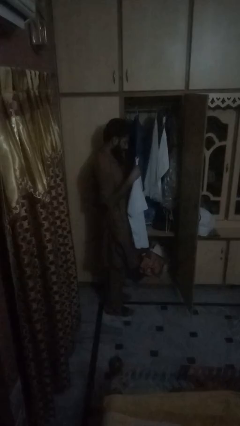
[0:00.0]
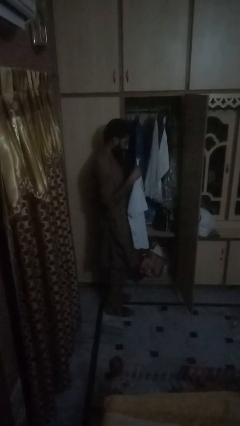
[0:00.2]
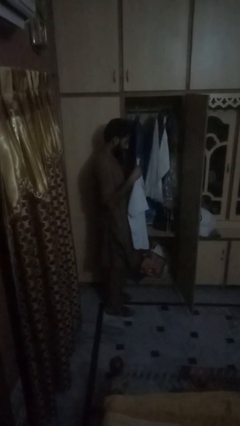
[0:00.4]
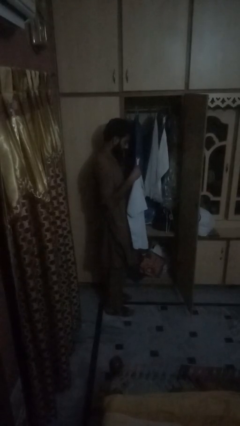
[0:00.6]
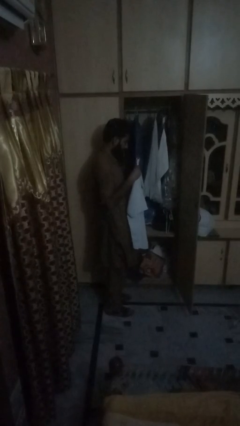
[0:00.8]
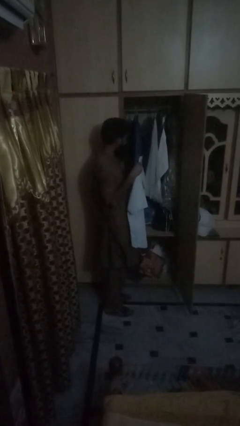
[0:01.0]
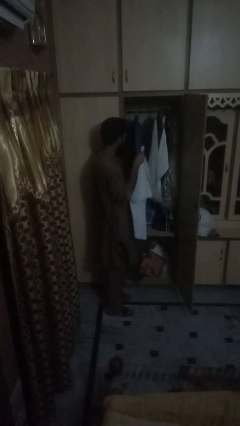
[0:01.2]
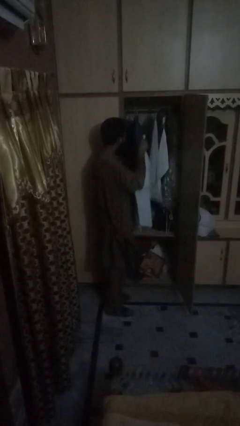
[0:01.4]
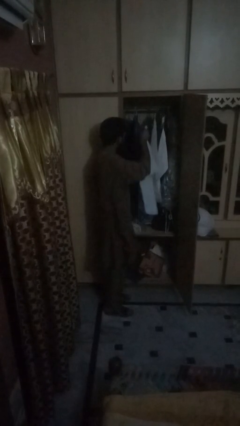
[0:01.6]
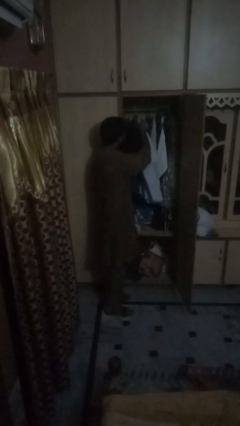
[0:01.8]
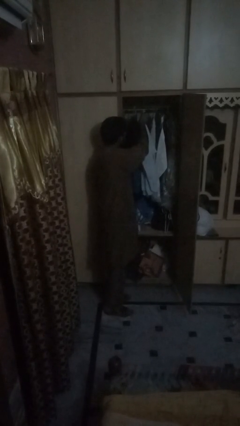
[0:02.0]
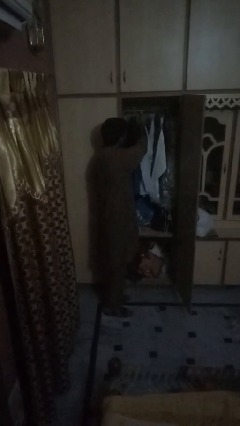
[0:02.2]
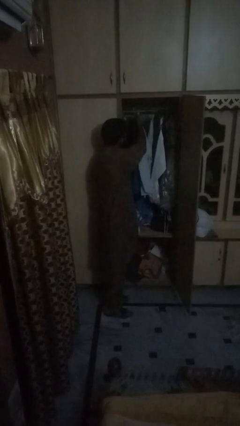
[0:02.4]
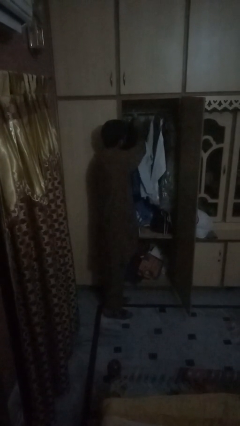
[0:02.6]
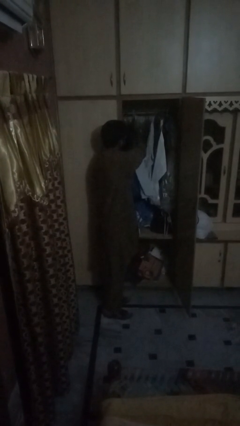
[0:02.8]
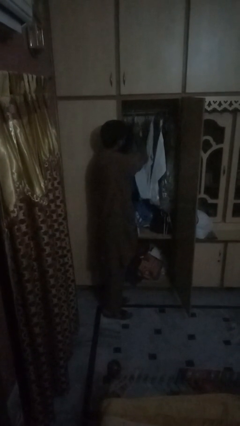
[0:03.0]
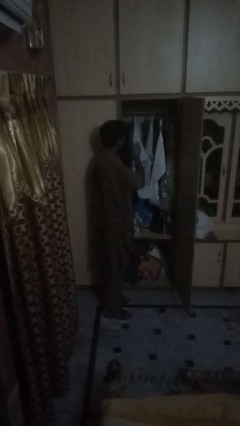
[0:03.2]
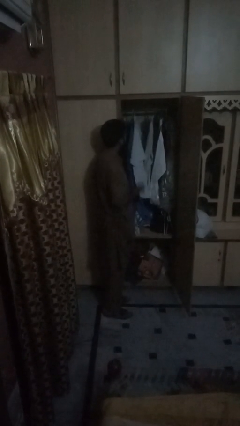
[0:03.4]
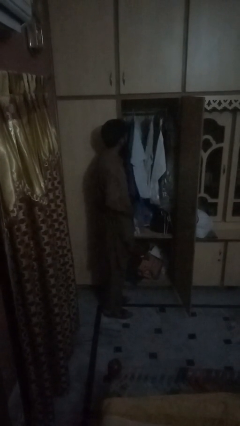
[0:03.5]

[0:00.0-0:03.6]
person takes clothes from dresser

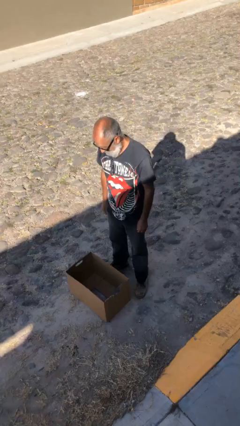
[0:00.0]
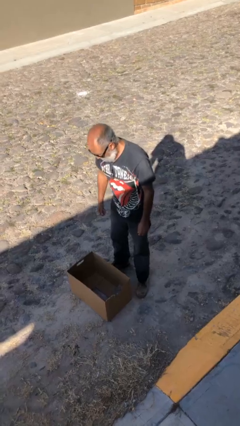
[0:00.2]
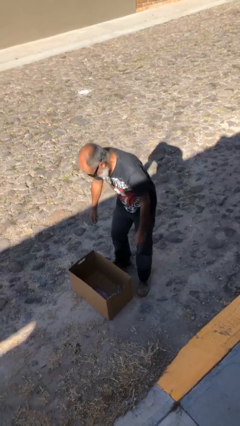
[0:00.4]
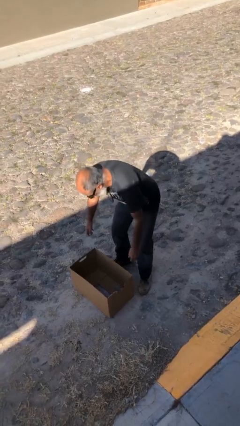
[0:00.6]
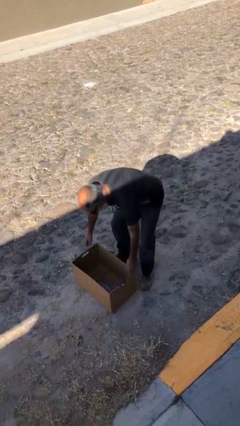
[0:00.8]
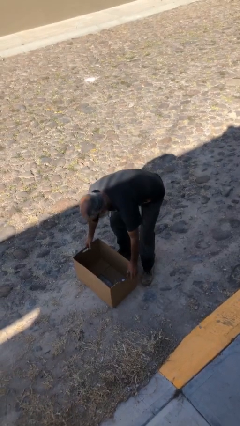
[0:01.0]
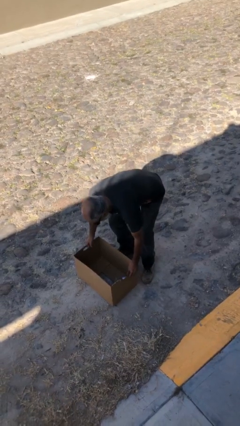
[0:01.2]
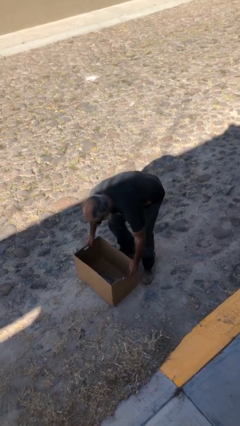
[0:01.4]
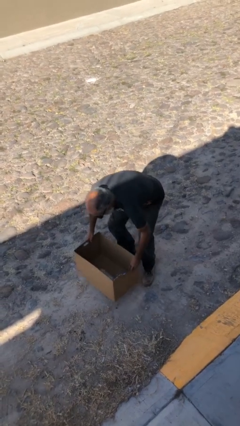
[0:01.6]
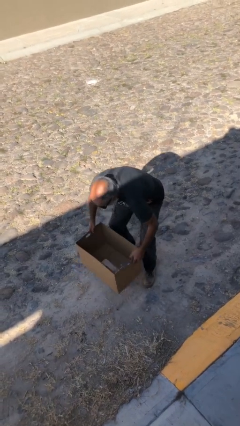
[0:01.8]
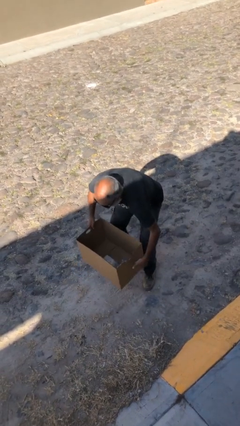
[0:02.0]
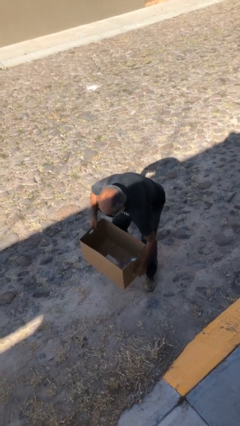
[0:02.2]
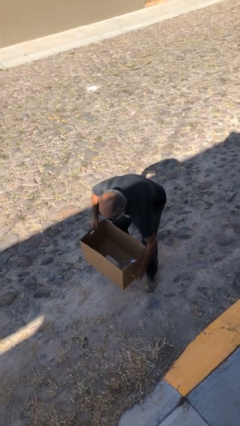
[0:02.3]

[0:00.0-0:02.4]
person picks up object from floor

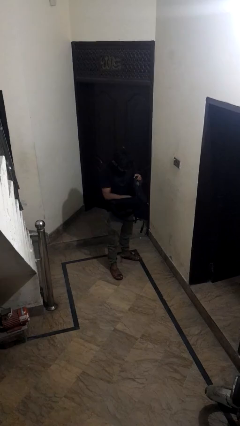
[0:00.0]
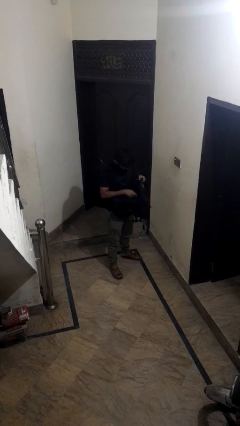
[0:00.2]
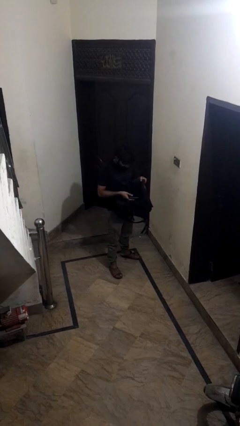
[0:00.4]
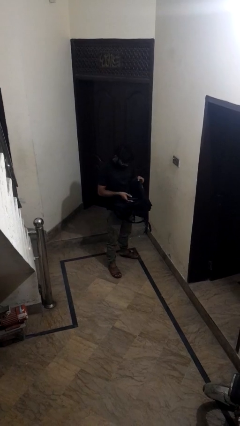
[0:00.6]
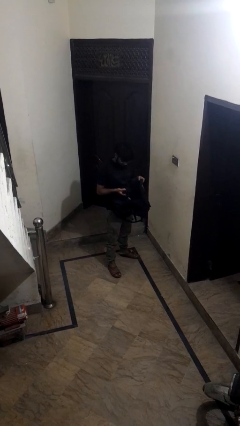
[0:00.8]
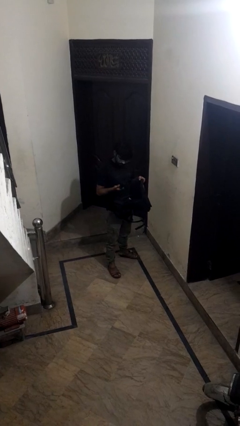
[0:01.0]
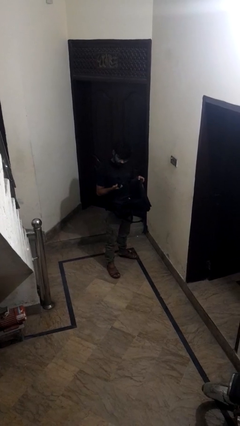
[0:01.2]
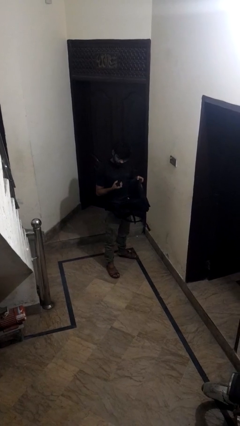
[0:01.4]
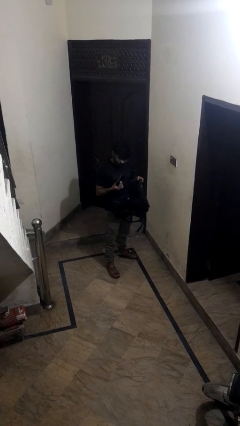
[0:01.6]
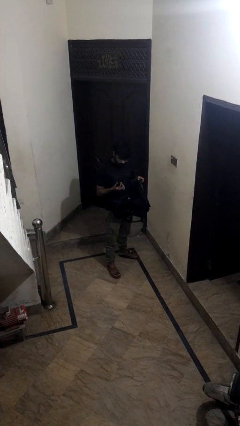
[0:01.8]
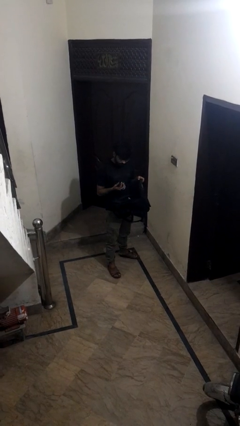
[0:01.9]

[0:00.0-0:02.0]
person takes object from backpack

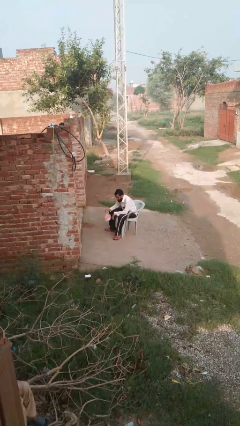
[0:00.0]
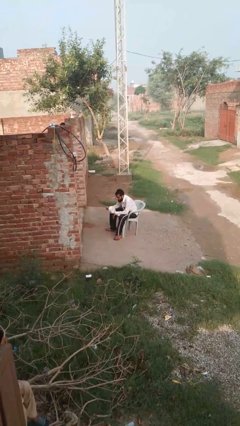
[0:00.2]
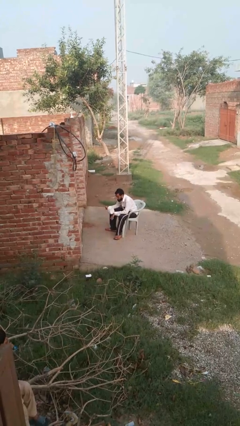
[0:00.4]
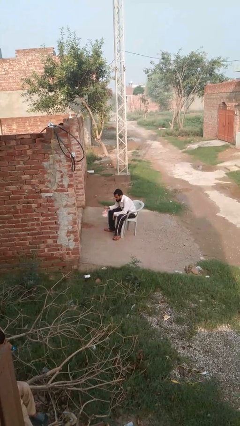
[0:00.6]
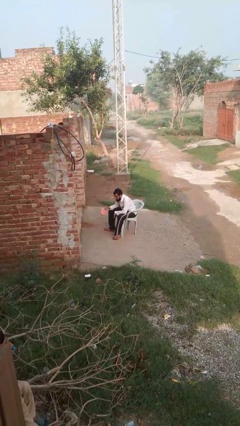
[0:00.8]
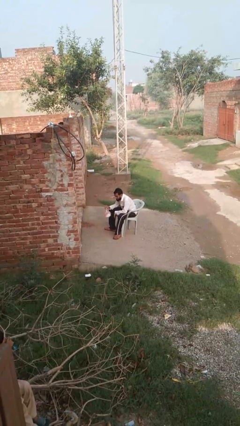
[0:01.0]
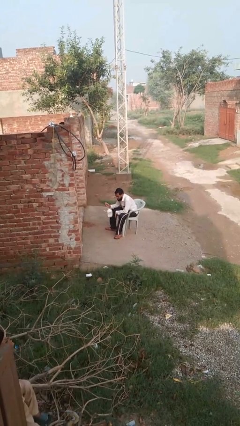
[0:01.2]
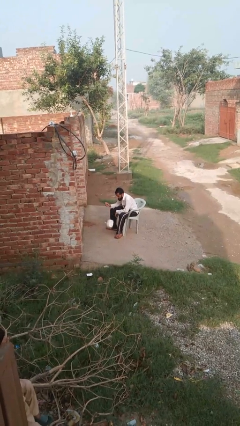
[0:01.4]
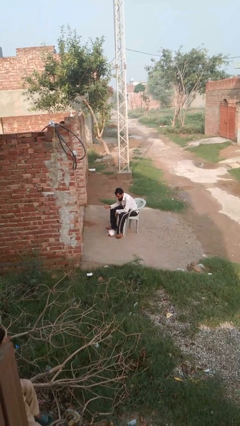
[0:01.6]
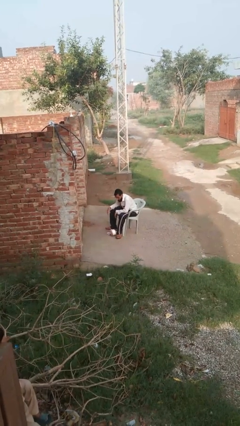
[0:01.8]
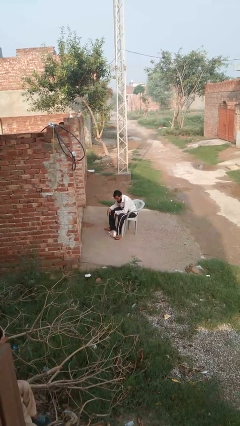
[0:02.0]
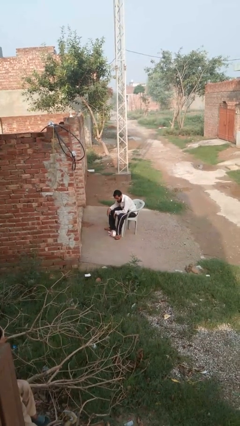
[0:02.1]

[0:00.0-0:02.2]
person drops object

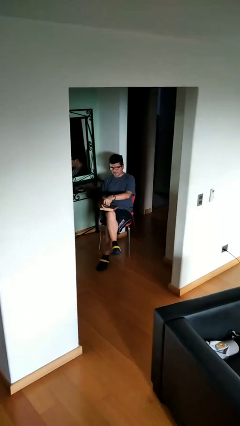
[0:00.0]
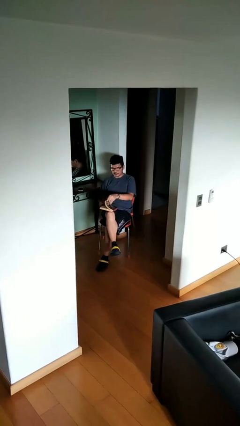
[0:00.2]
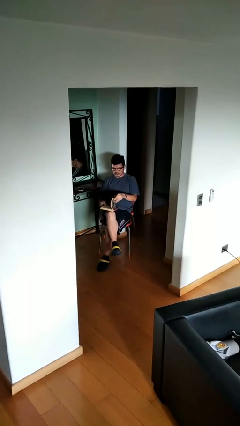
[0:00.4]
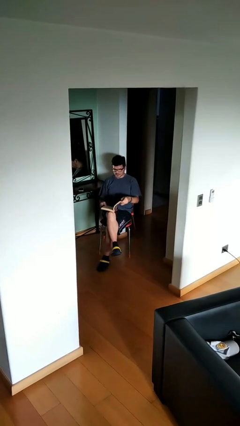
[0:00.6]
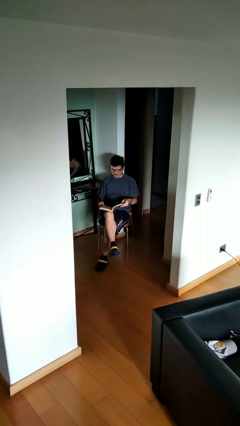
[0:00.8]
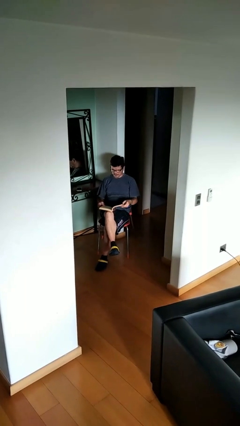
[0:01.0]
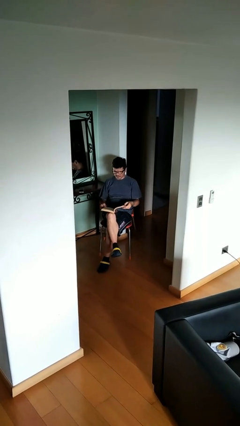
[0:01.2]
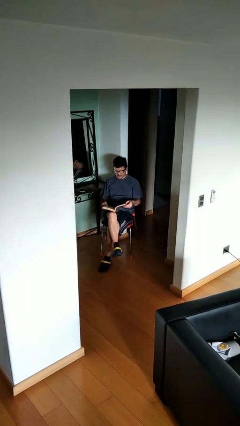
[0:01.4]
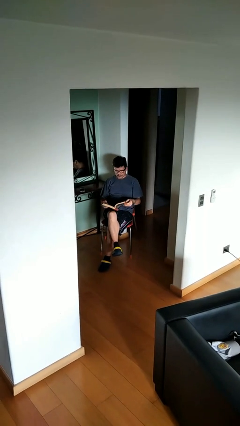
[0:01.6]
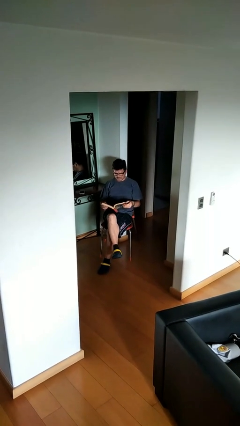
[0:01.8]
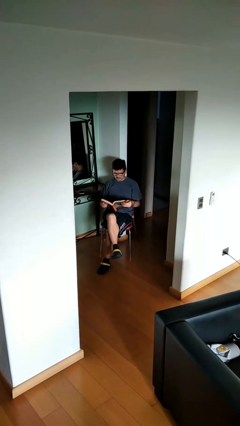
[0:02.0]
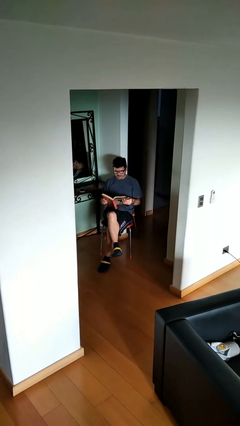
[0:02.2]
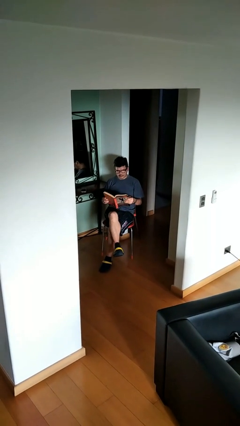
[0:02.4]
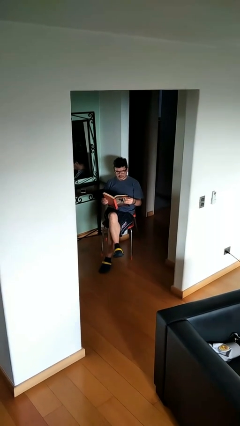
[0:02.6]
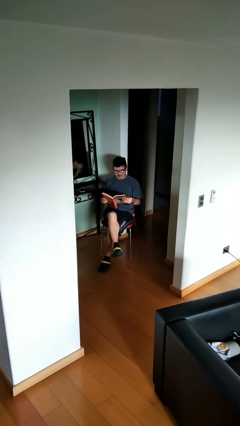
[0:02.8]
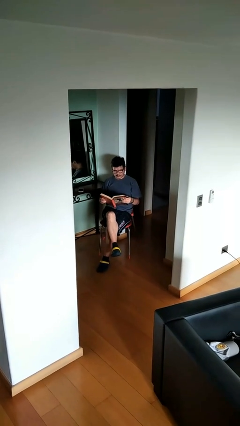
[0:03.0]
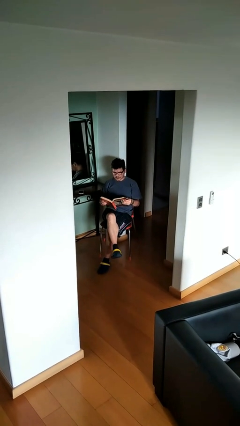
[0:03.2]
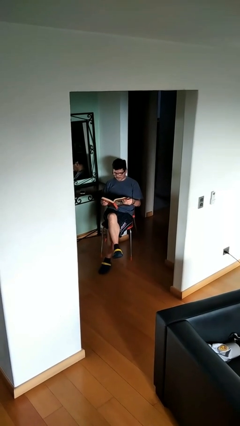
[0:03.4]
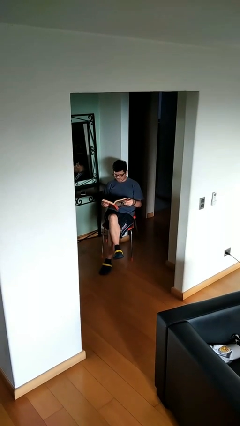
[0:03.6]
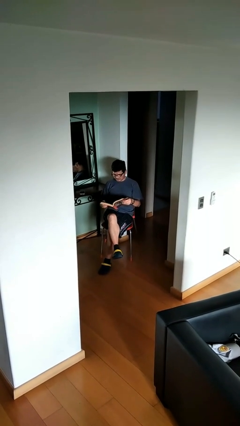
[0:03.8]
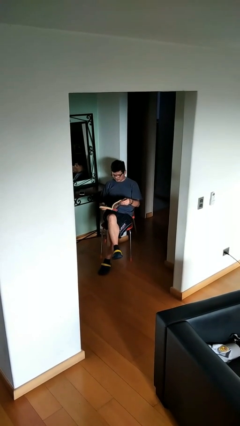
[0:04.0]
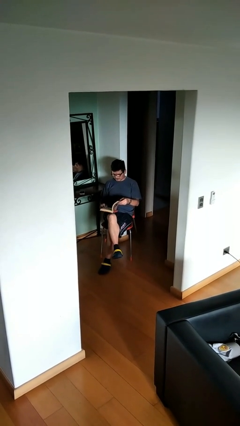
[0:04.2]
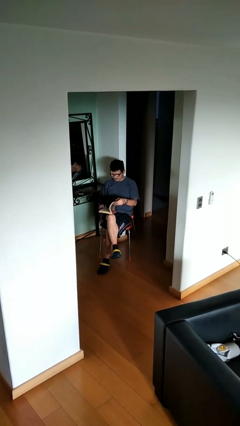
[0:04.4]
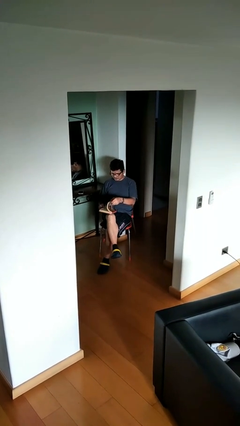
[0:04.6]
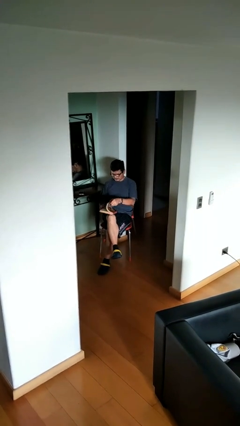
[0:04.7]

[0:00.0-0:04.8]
person reads document

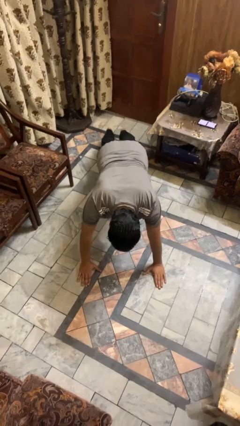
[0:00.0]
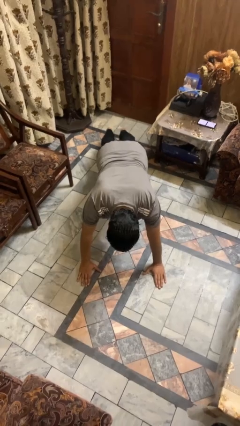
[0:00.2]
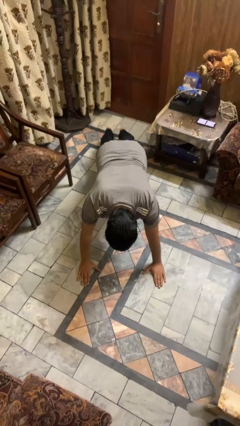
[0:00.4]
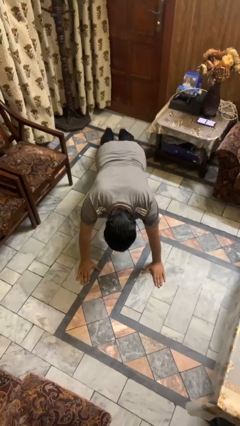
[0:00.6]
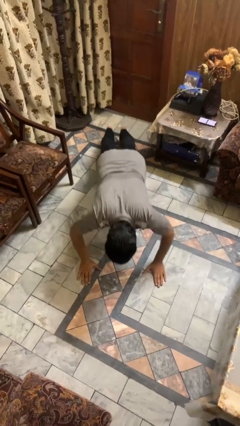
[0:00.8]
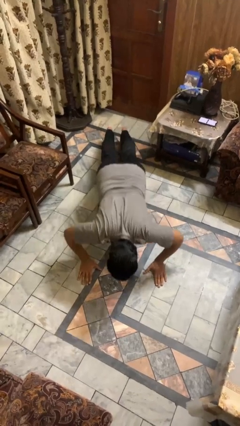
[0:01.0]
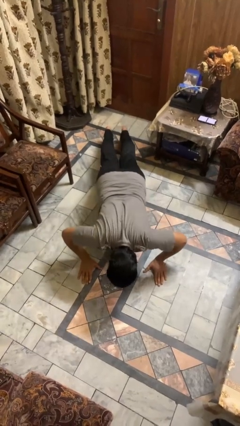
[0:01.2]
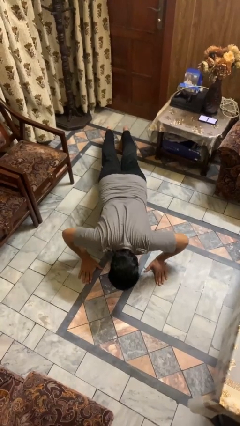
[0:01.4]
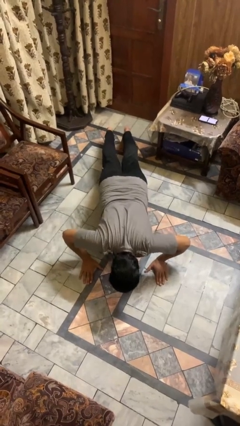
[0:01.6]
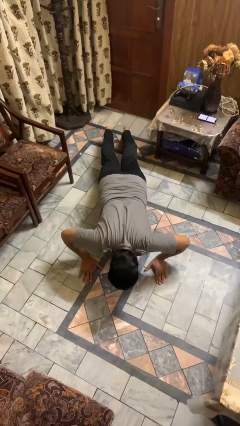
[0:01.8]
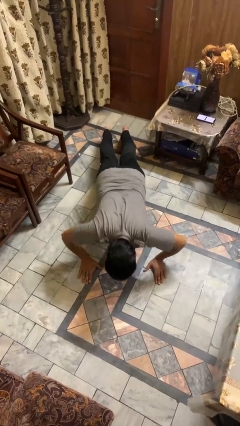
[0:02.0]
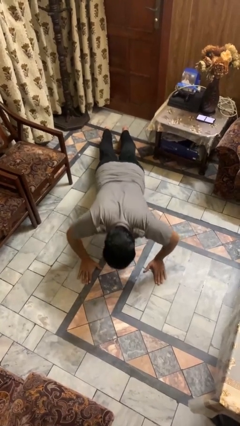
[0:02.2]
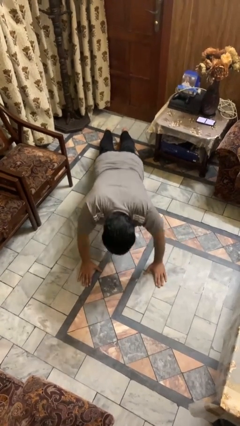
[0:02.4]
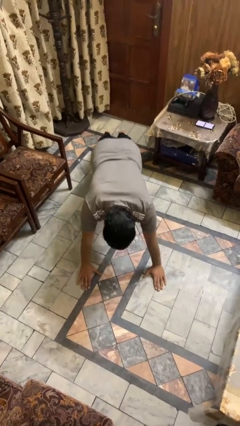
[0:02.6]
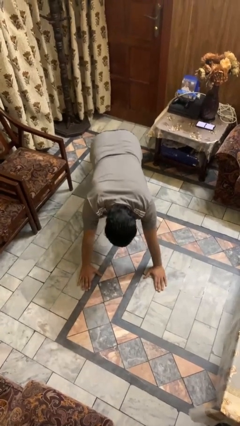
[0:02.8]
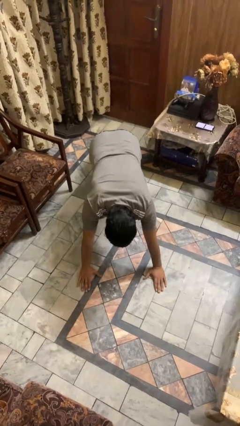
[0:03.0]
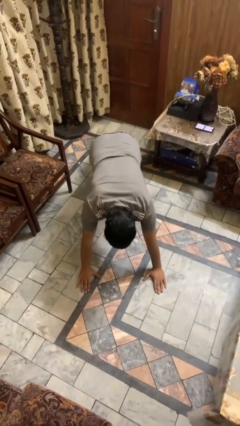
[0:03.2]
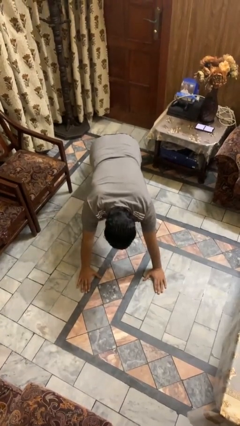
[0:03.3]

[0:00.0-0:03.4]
person exercises with pushup
